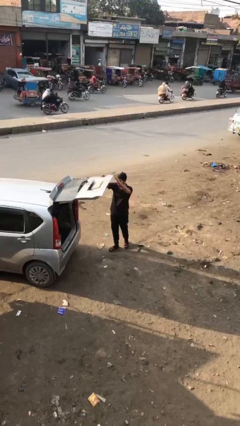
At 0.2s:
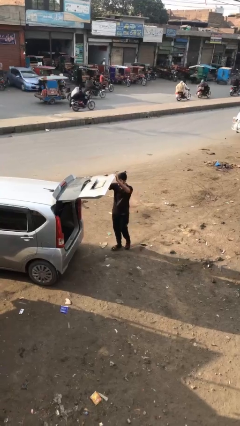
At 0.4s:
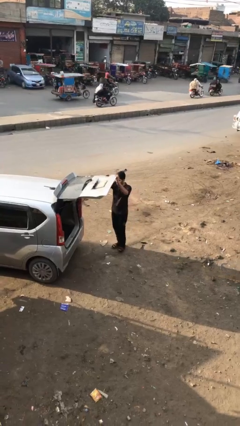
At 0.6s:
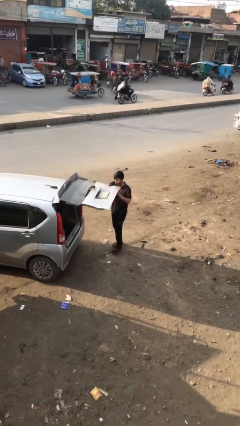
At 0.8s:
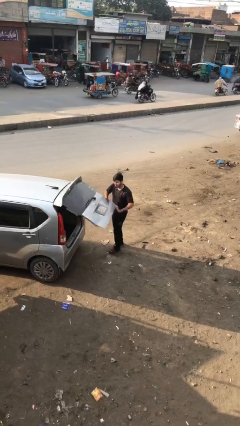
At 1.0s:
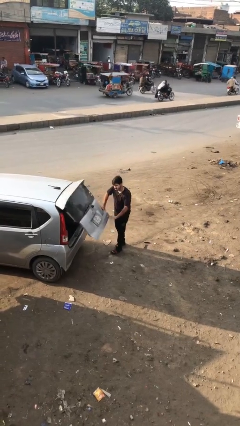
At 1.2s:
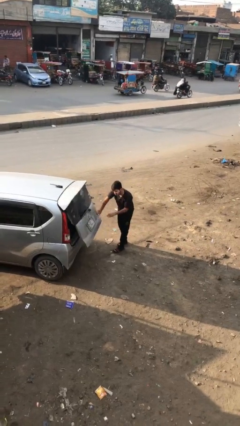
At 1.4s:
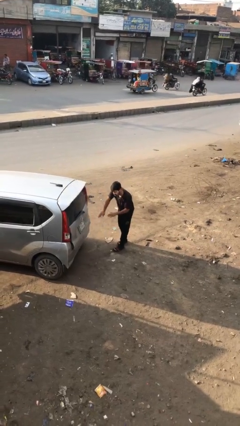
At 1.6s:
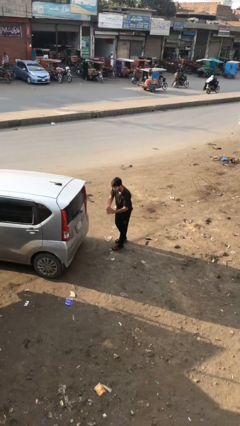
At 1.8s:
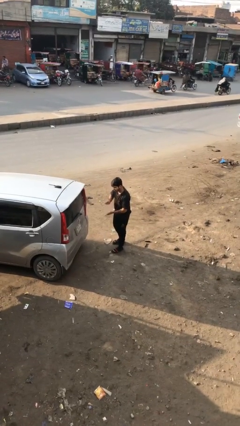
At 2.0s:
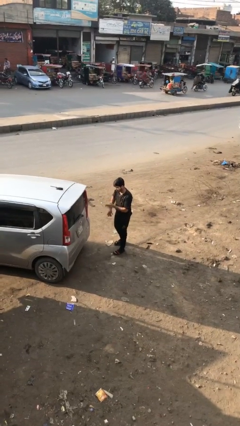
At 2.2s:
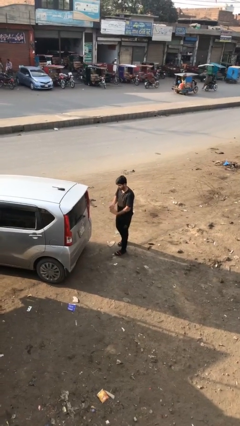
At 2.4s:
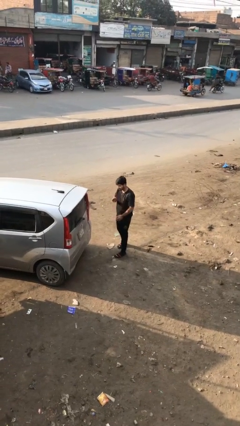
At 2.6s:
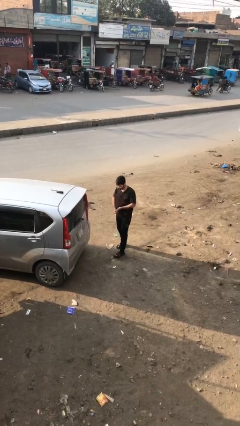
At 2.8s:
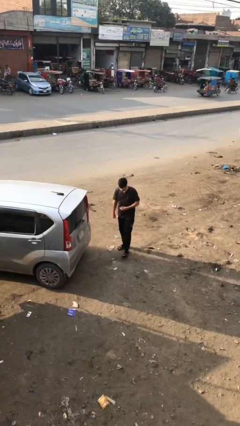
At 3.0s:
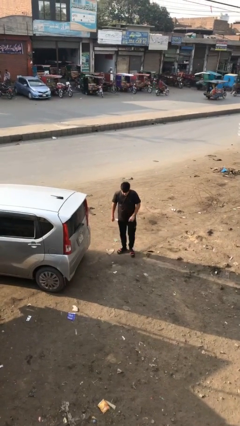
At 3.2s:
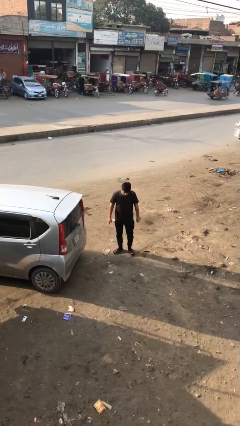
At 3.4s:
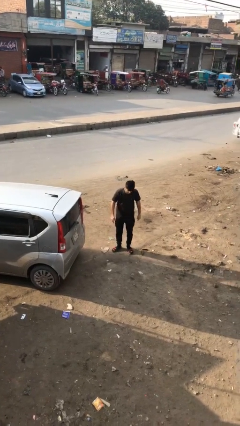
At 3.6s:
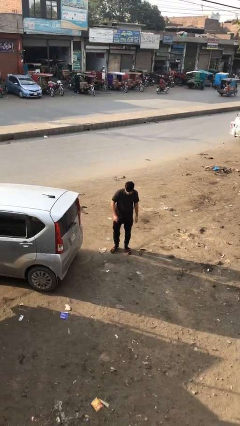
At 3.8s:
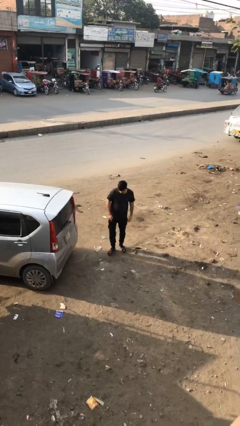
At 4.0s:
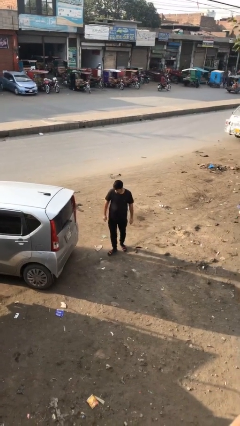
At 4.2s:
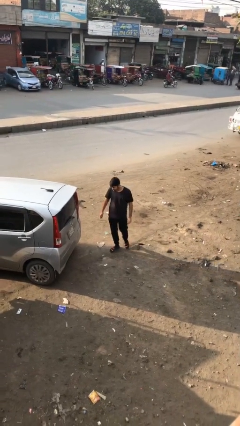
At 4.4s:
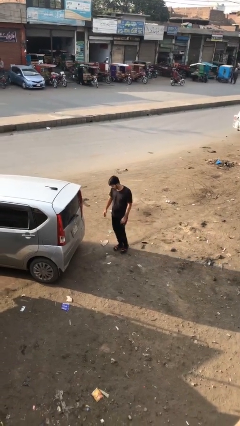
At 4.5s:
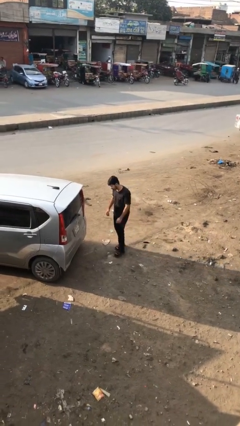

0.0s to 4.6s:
person closes car trunk

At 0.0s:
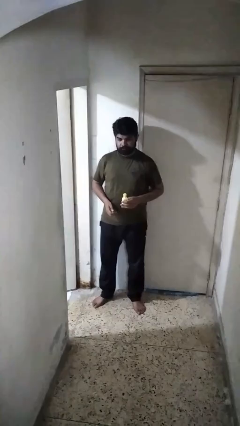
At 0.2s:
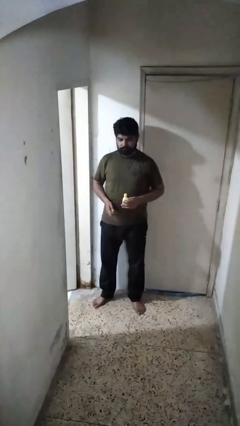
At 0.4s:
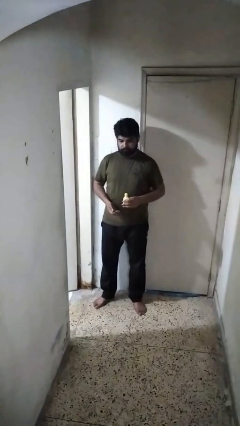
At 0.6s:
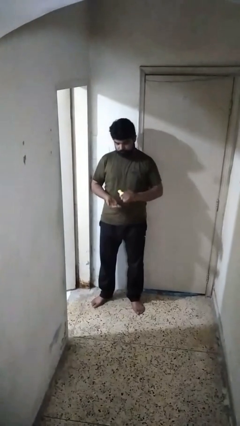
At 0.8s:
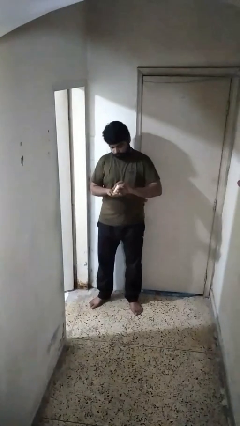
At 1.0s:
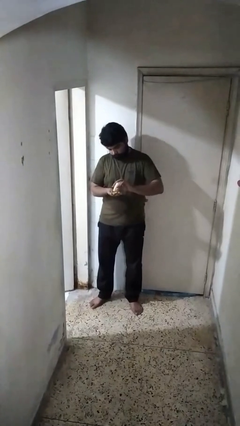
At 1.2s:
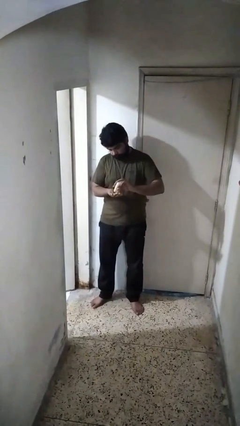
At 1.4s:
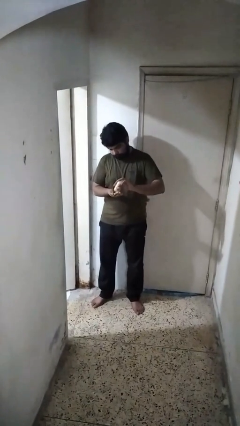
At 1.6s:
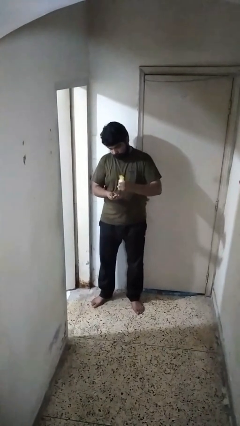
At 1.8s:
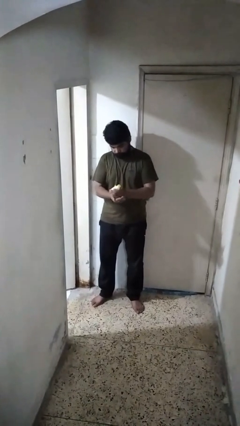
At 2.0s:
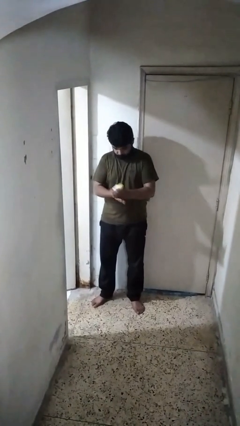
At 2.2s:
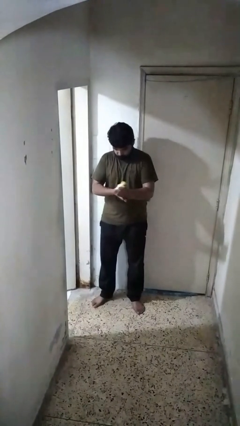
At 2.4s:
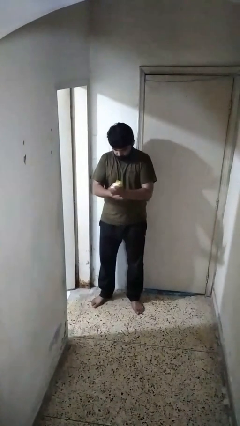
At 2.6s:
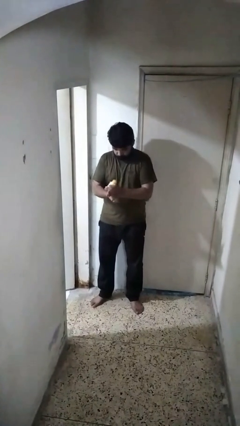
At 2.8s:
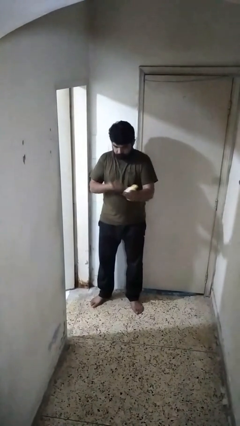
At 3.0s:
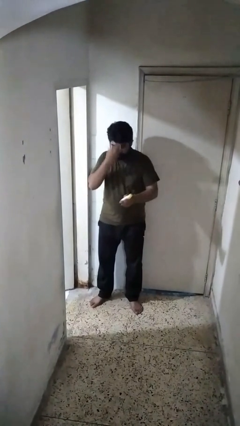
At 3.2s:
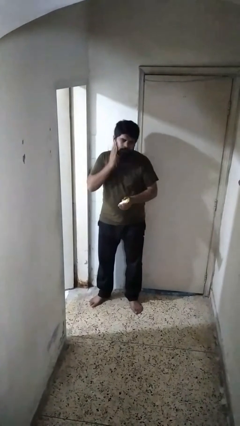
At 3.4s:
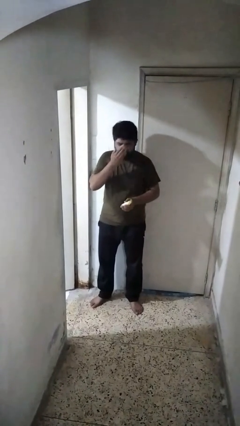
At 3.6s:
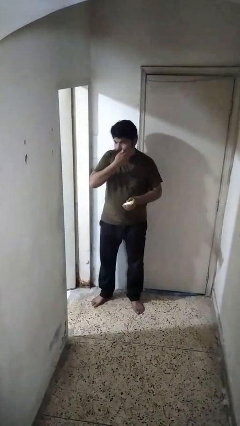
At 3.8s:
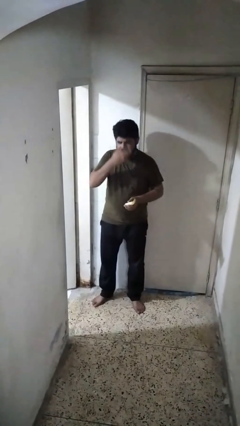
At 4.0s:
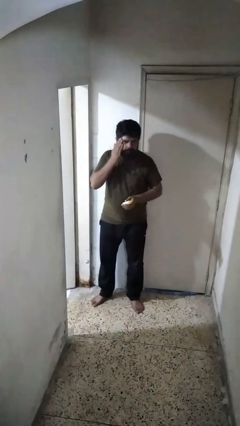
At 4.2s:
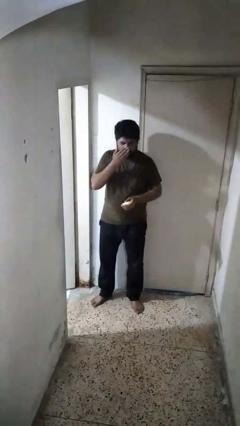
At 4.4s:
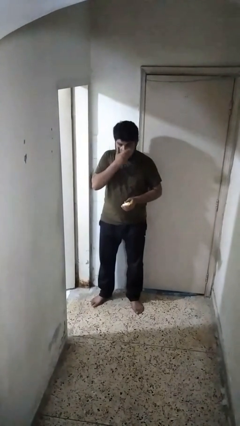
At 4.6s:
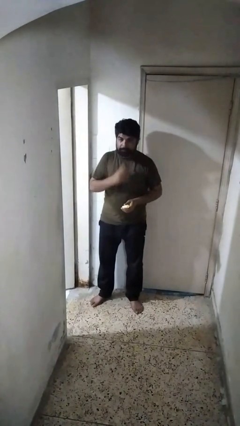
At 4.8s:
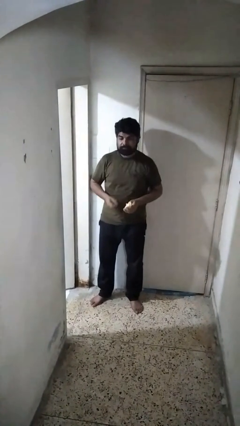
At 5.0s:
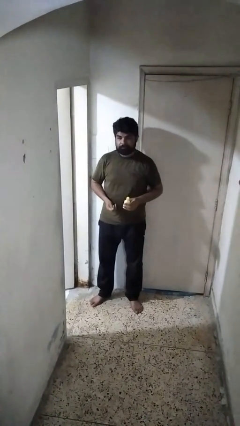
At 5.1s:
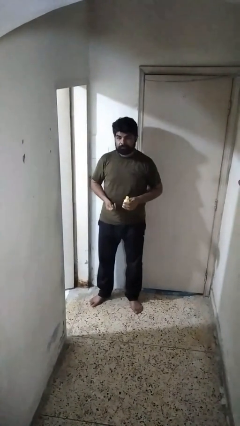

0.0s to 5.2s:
person applies sunscreen

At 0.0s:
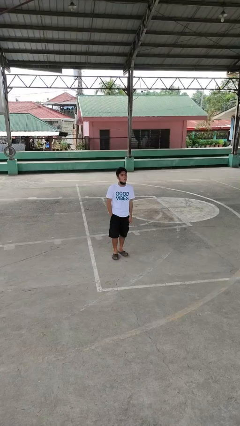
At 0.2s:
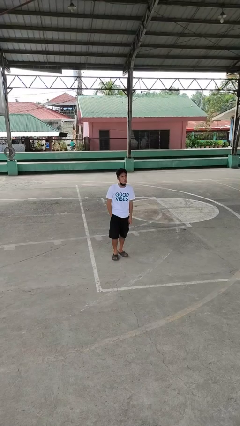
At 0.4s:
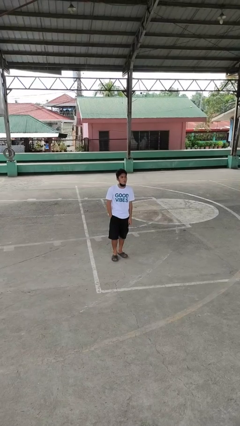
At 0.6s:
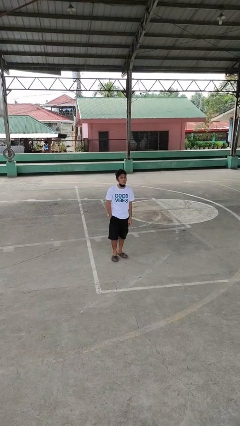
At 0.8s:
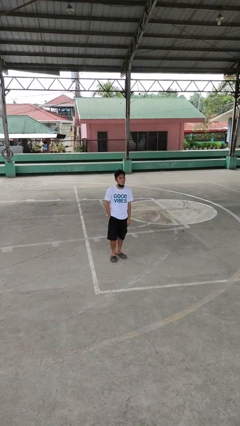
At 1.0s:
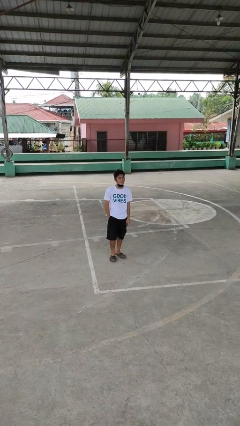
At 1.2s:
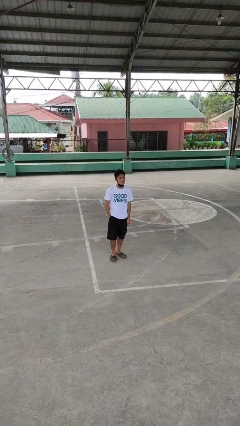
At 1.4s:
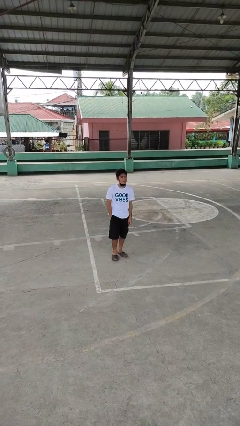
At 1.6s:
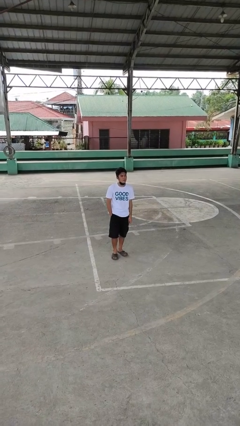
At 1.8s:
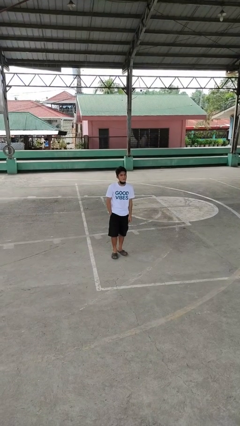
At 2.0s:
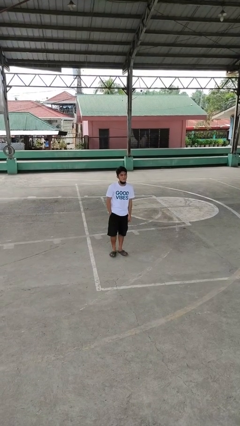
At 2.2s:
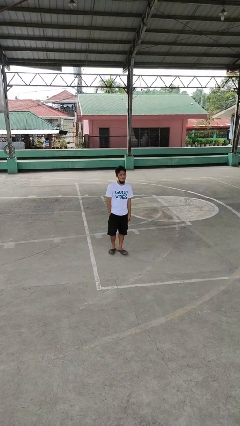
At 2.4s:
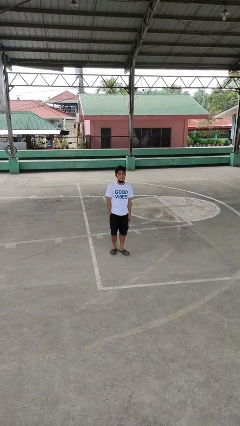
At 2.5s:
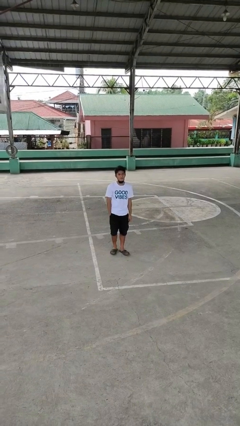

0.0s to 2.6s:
person sticks out tongue

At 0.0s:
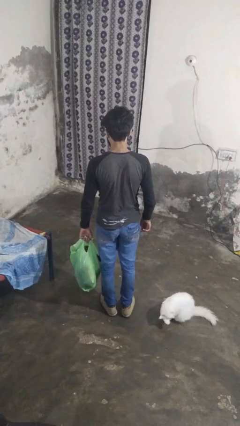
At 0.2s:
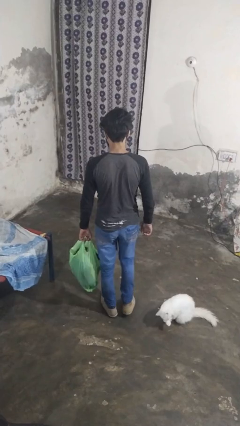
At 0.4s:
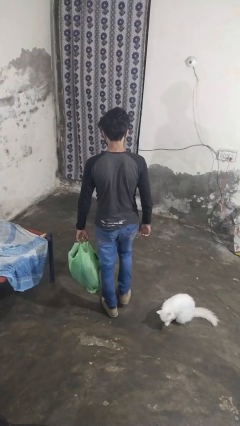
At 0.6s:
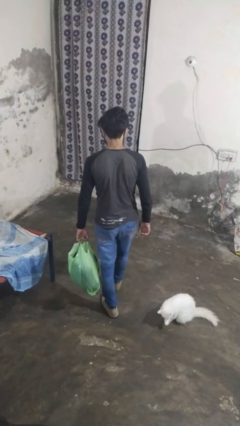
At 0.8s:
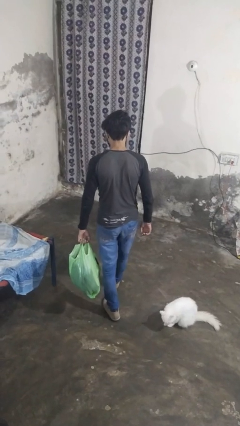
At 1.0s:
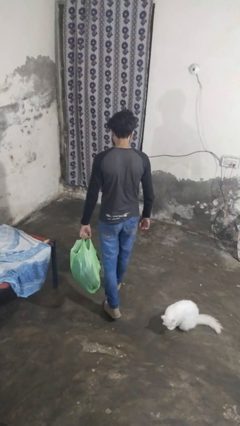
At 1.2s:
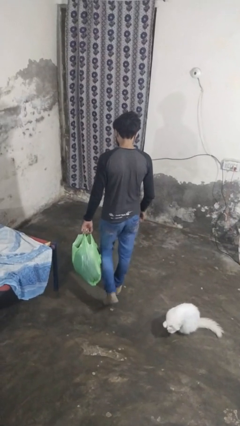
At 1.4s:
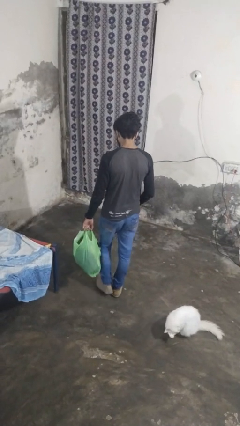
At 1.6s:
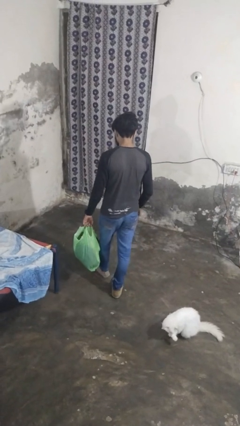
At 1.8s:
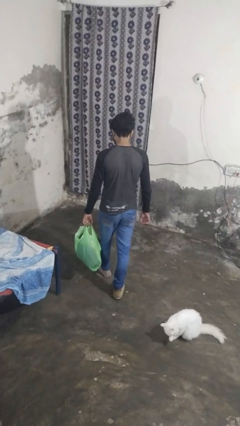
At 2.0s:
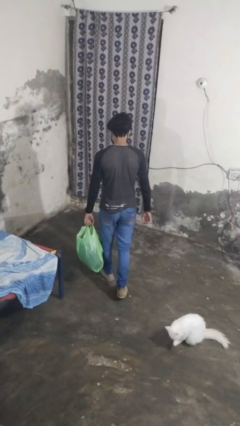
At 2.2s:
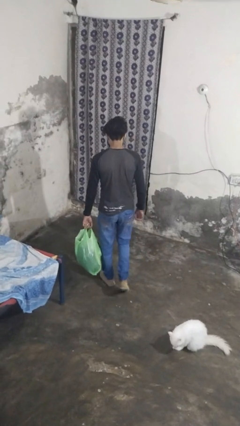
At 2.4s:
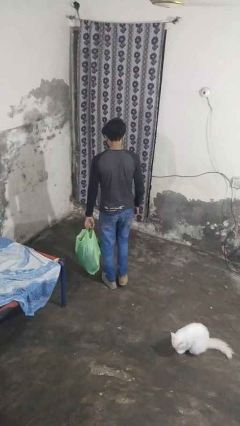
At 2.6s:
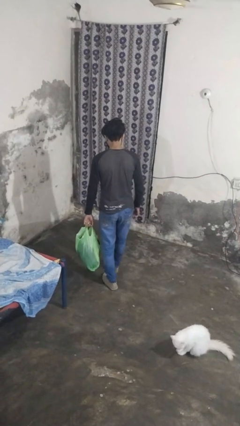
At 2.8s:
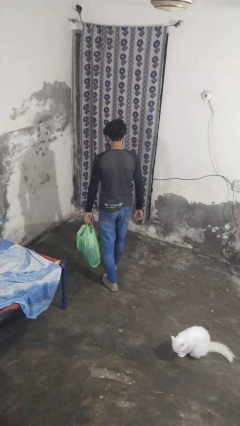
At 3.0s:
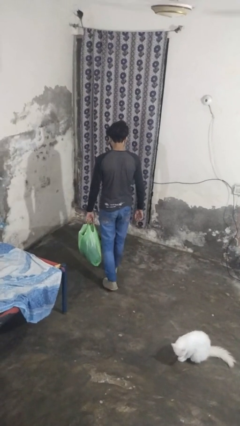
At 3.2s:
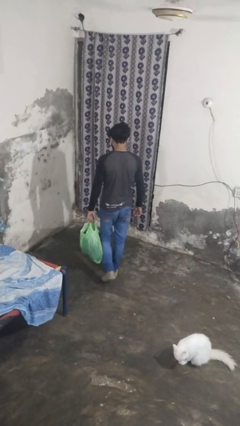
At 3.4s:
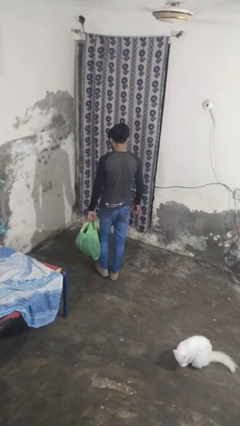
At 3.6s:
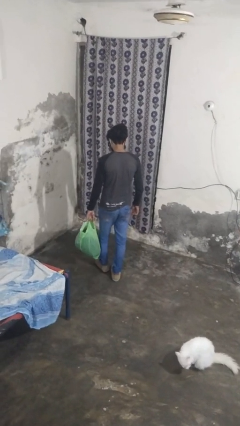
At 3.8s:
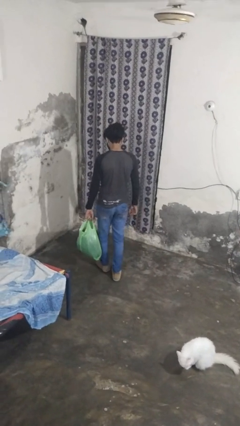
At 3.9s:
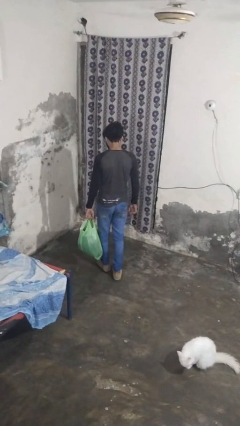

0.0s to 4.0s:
person carries groceries

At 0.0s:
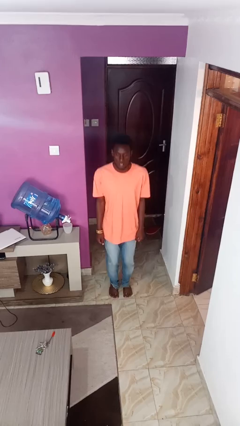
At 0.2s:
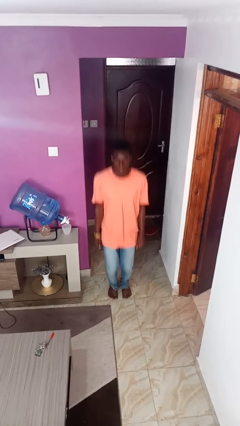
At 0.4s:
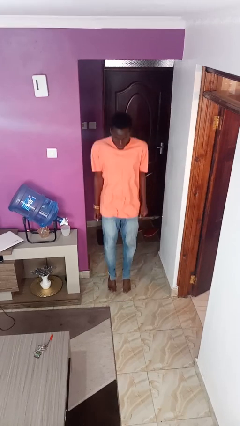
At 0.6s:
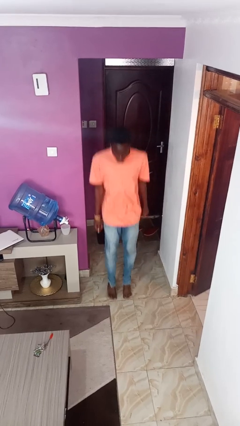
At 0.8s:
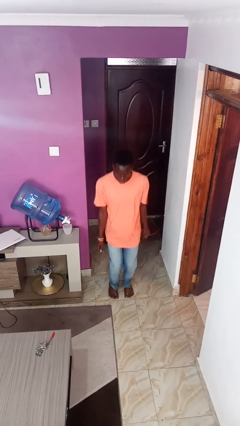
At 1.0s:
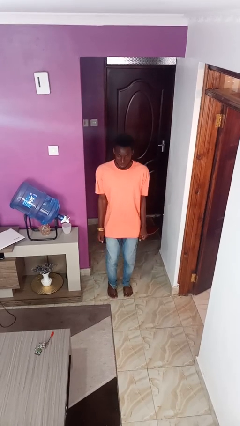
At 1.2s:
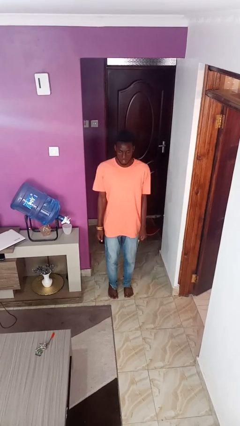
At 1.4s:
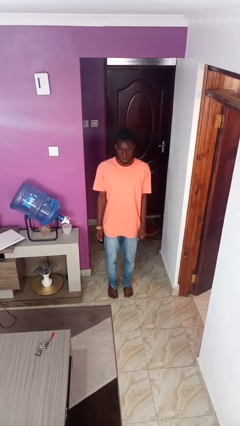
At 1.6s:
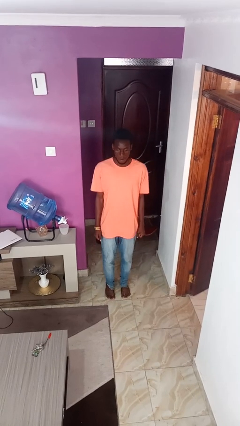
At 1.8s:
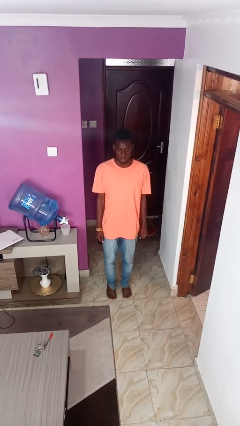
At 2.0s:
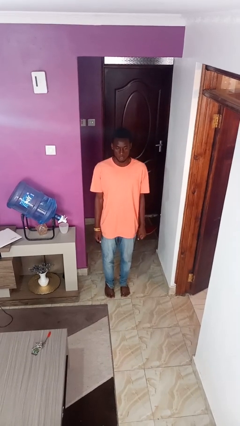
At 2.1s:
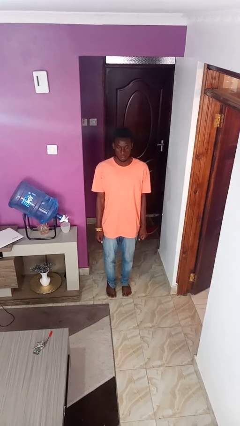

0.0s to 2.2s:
person jumps
